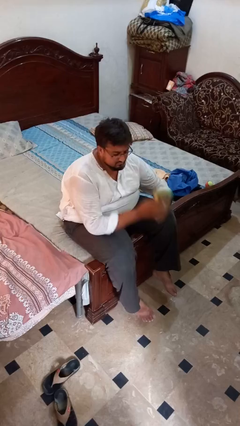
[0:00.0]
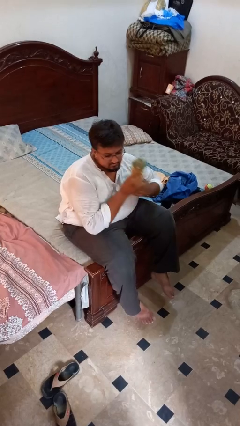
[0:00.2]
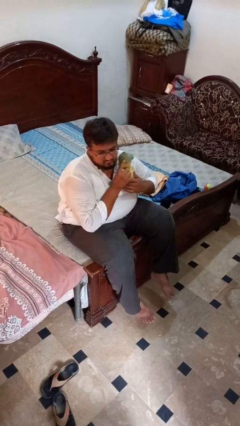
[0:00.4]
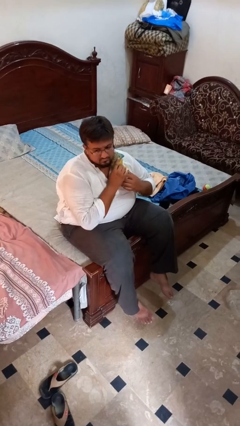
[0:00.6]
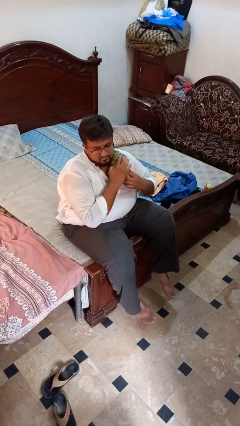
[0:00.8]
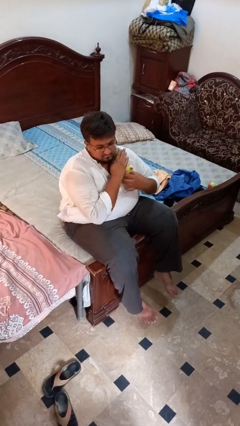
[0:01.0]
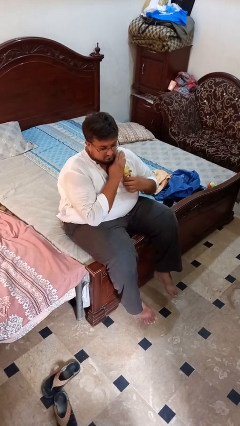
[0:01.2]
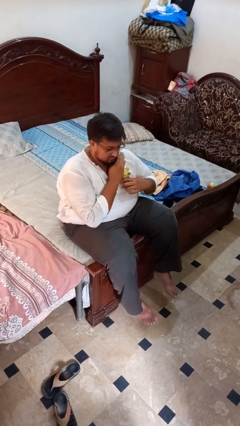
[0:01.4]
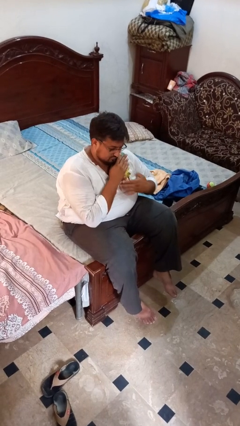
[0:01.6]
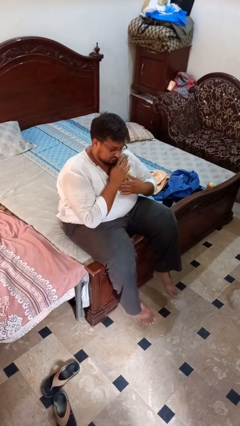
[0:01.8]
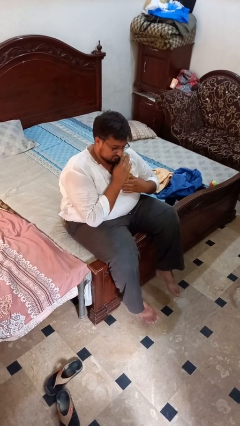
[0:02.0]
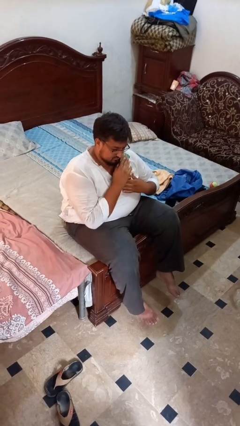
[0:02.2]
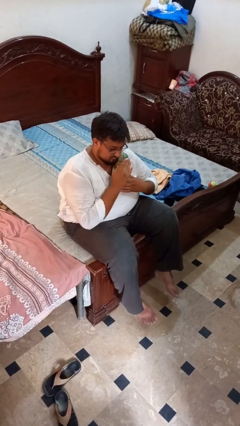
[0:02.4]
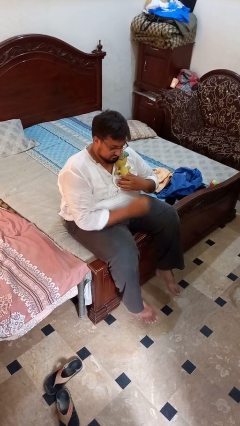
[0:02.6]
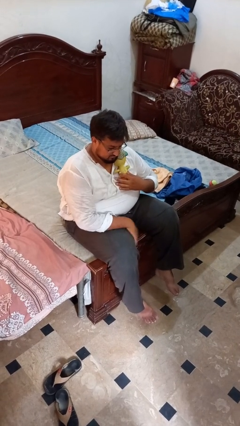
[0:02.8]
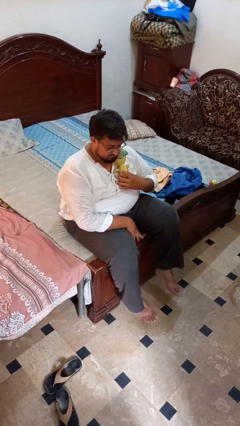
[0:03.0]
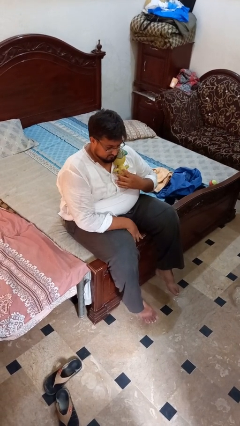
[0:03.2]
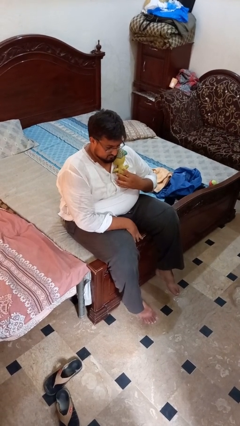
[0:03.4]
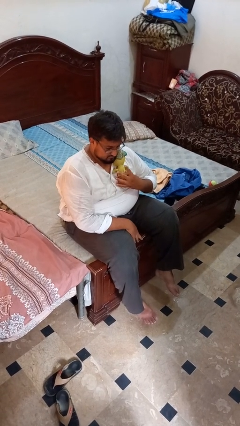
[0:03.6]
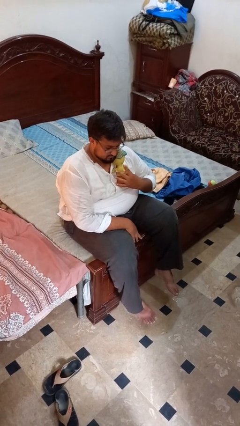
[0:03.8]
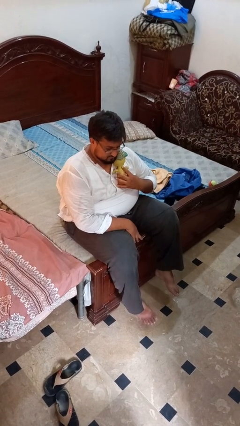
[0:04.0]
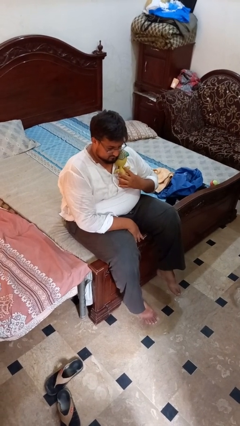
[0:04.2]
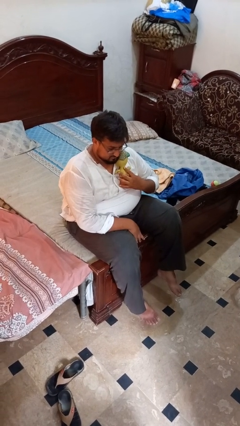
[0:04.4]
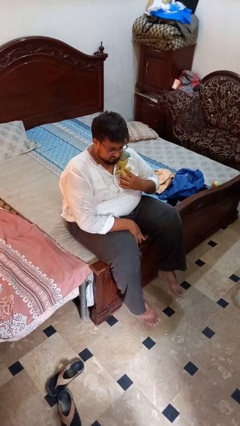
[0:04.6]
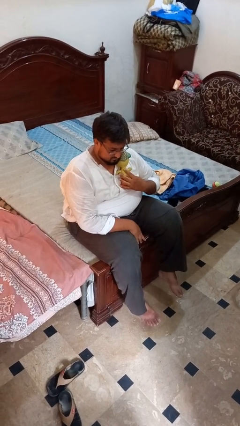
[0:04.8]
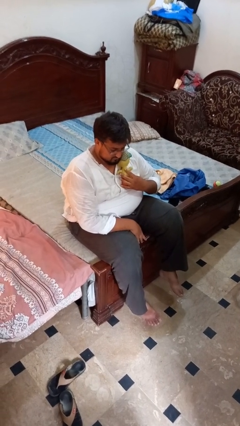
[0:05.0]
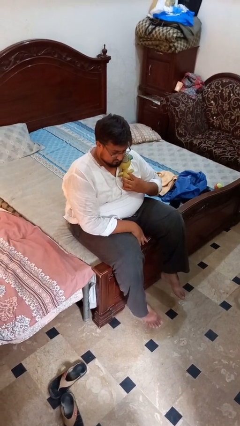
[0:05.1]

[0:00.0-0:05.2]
person hugs stuffed animal

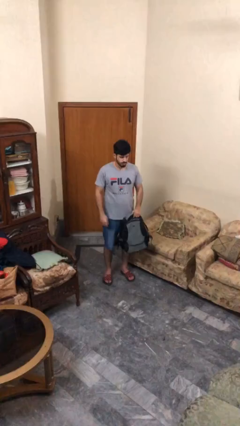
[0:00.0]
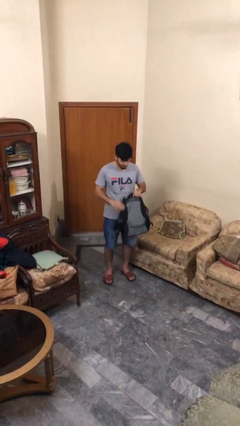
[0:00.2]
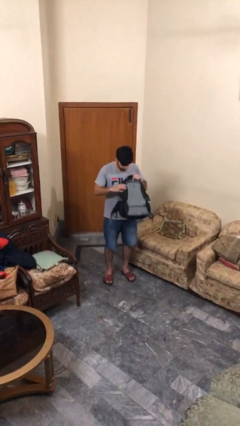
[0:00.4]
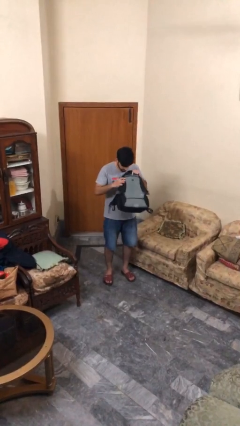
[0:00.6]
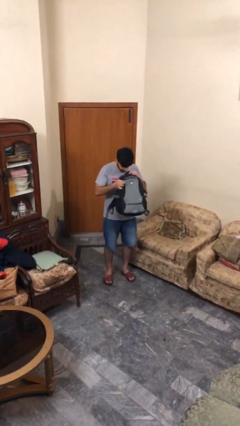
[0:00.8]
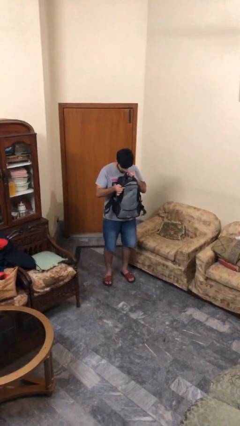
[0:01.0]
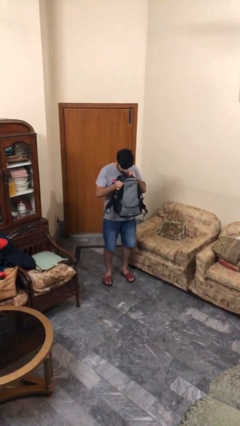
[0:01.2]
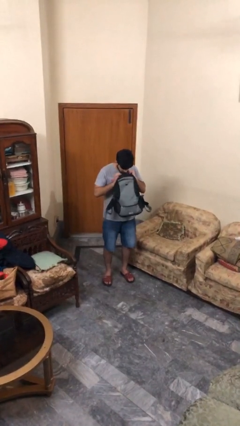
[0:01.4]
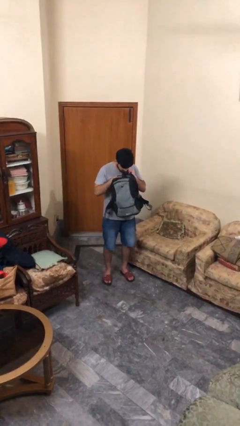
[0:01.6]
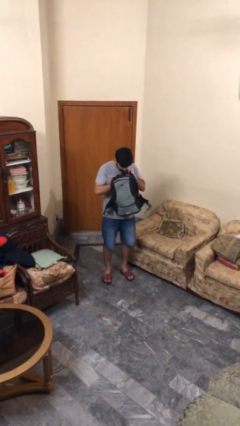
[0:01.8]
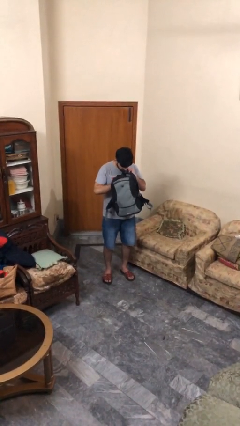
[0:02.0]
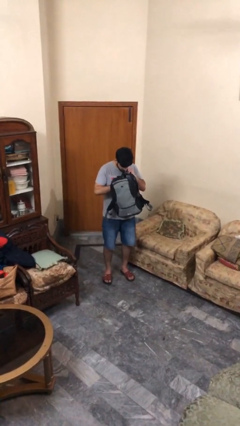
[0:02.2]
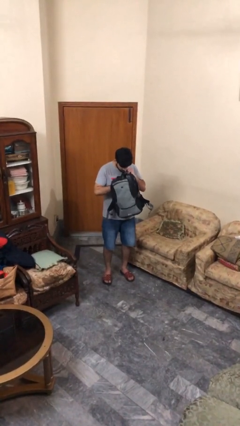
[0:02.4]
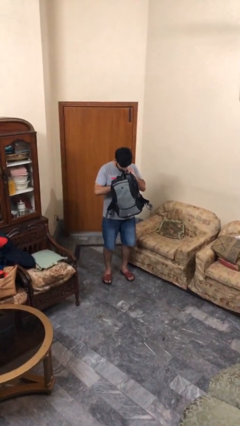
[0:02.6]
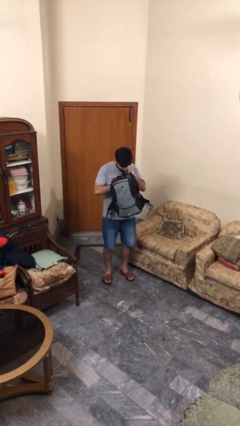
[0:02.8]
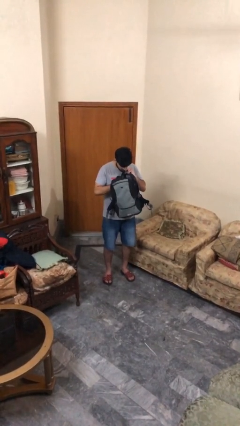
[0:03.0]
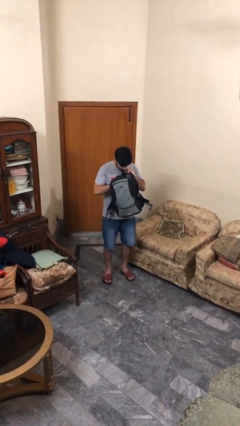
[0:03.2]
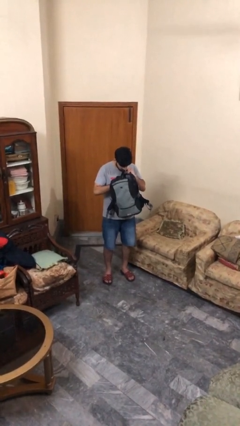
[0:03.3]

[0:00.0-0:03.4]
person searches in backpack

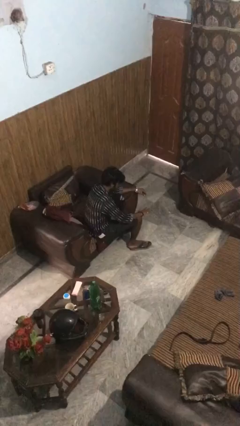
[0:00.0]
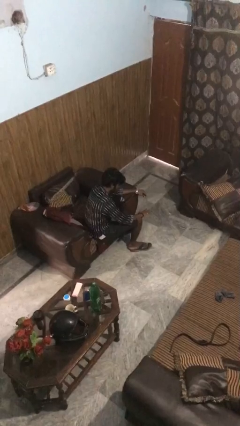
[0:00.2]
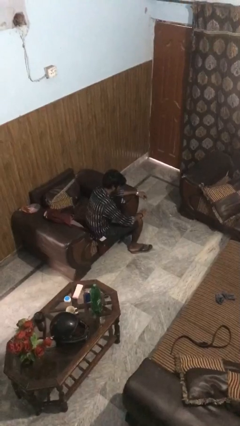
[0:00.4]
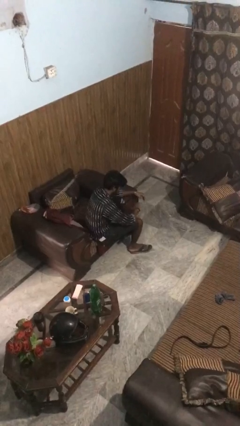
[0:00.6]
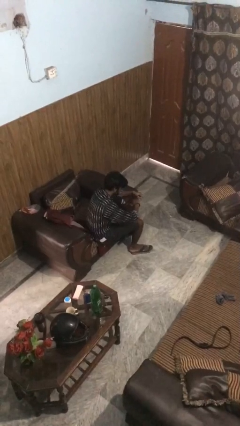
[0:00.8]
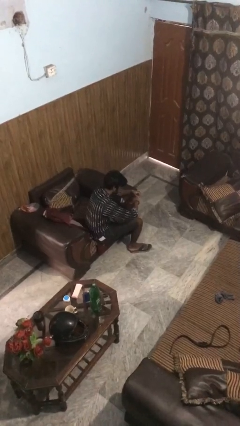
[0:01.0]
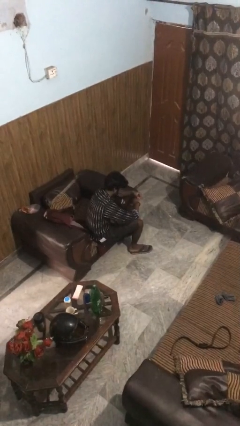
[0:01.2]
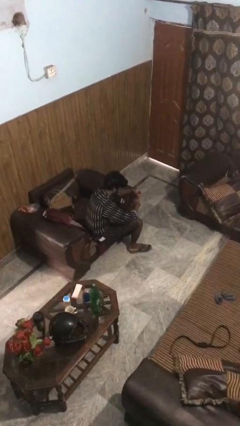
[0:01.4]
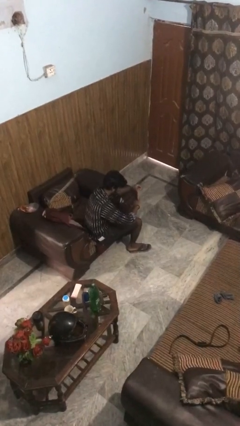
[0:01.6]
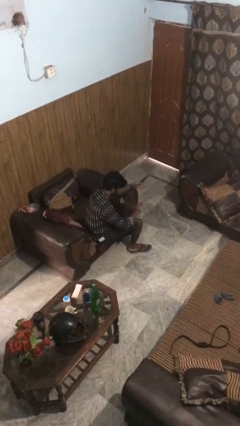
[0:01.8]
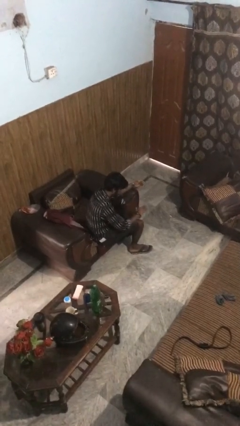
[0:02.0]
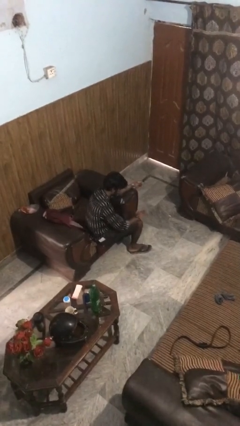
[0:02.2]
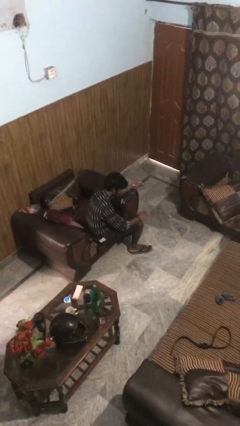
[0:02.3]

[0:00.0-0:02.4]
person takes off ring

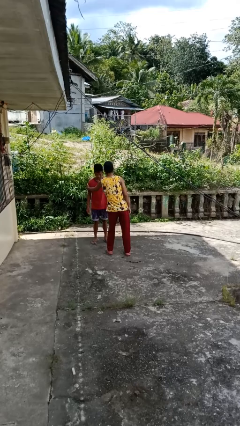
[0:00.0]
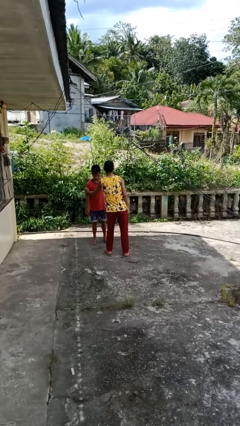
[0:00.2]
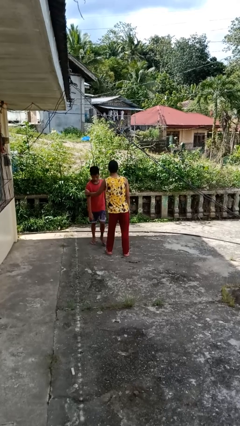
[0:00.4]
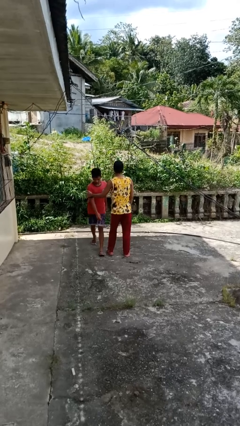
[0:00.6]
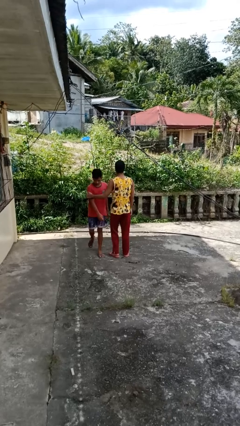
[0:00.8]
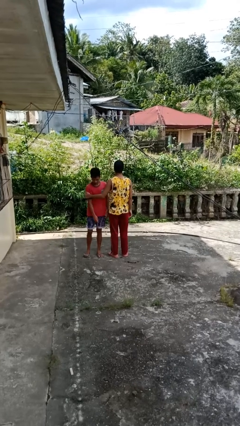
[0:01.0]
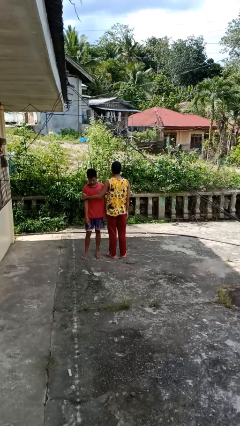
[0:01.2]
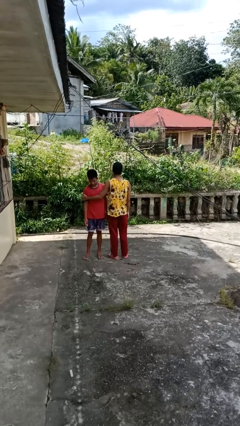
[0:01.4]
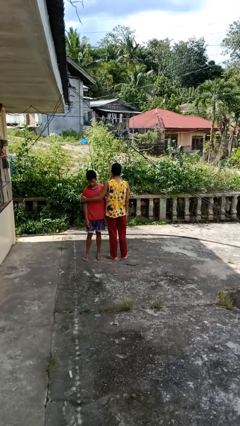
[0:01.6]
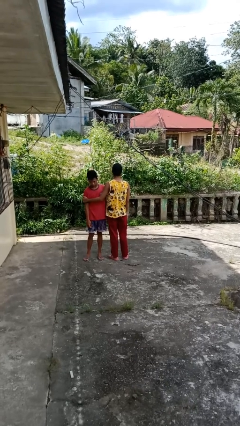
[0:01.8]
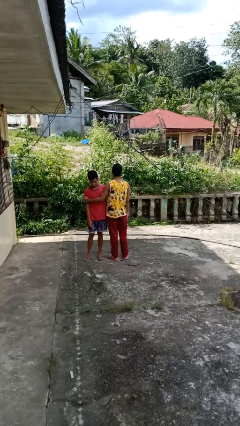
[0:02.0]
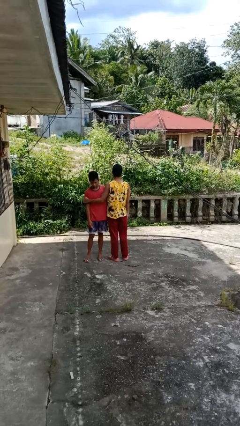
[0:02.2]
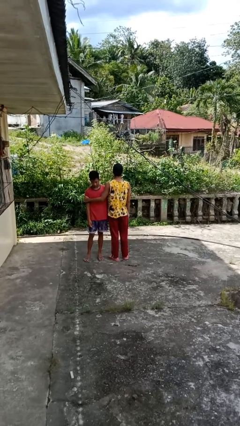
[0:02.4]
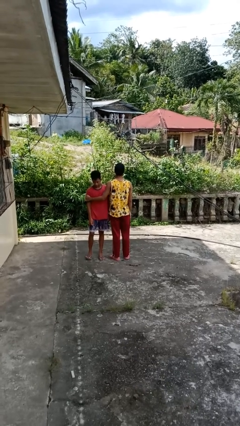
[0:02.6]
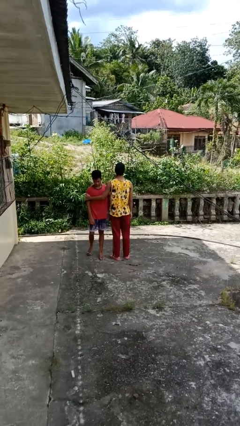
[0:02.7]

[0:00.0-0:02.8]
person grabs person by bicep

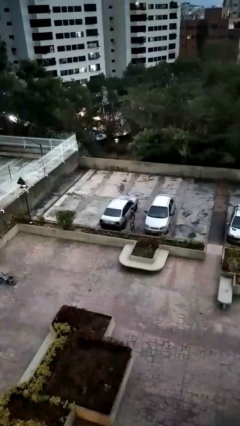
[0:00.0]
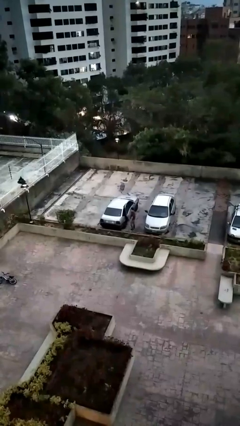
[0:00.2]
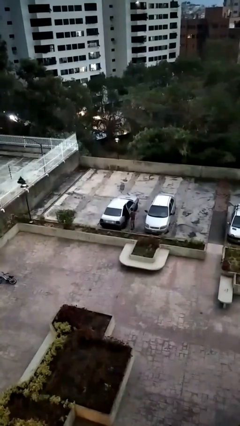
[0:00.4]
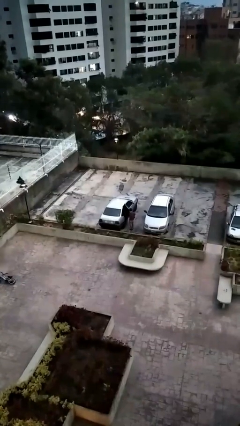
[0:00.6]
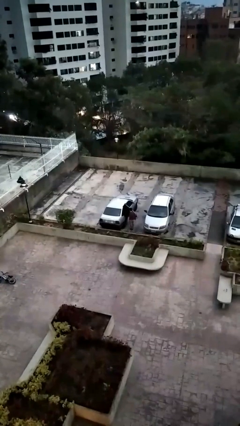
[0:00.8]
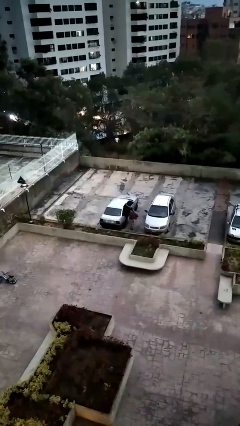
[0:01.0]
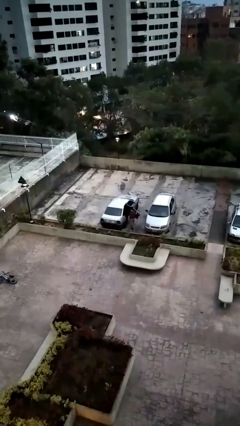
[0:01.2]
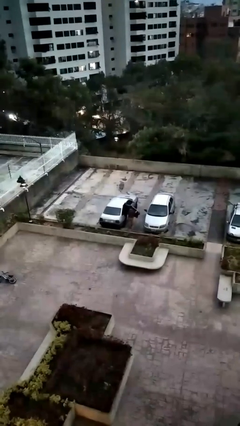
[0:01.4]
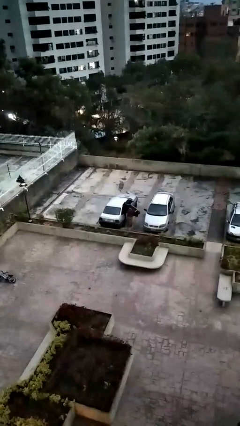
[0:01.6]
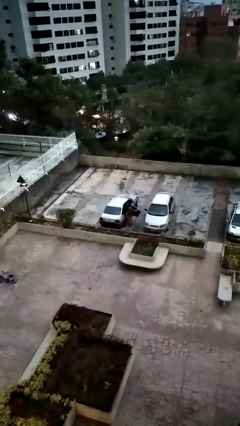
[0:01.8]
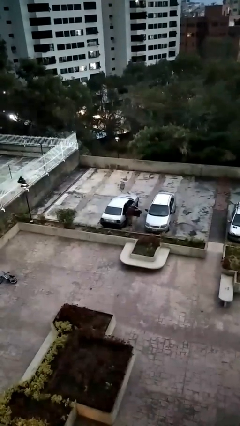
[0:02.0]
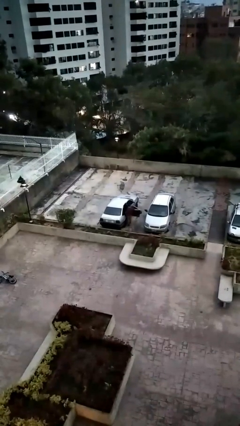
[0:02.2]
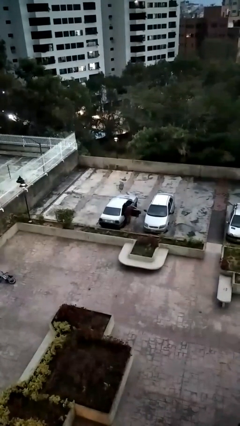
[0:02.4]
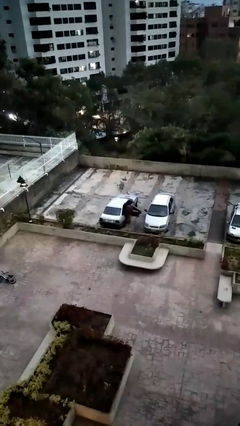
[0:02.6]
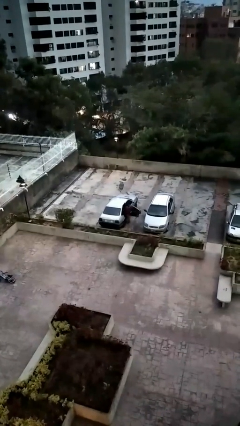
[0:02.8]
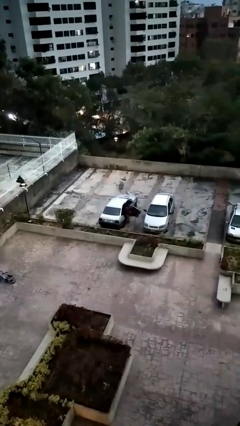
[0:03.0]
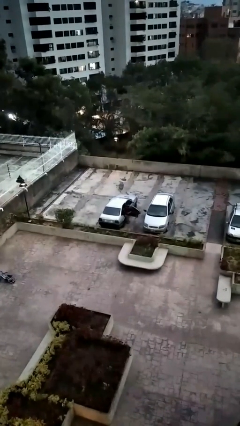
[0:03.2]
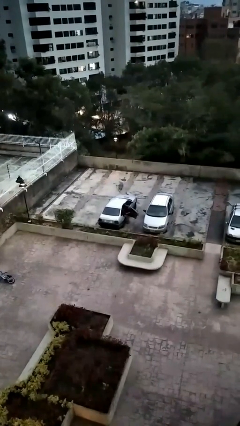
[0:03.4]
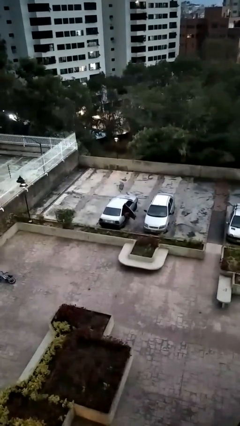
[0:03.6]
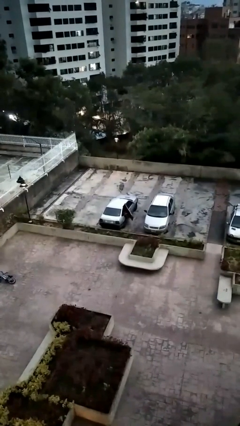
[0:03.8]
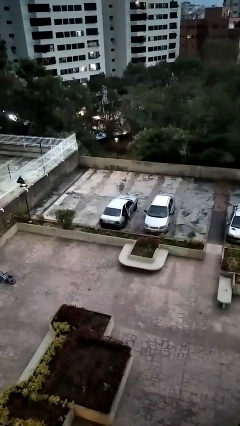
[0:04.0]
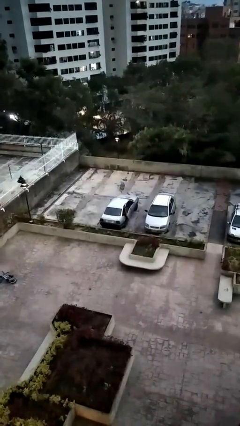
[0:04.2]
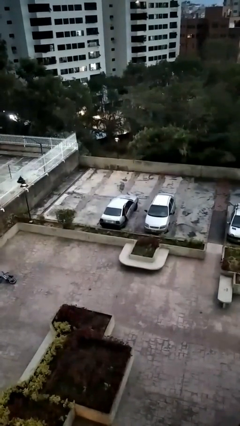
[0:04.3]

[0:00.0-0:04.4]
car picks up person
